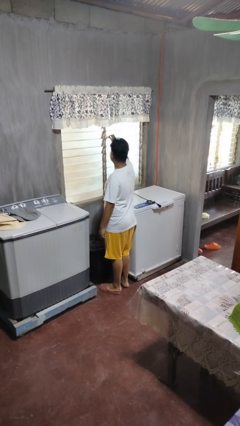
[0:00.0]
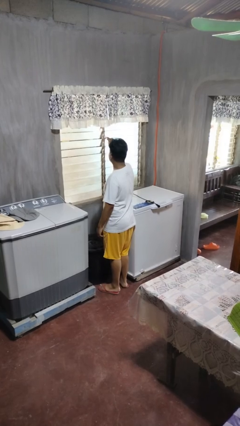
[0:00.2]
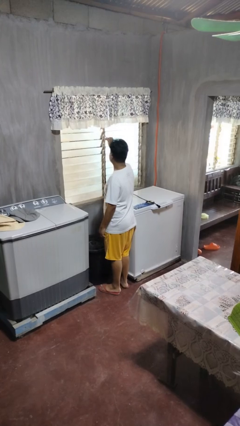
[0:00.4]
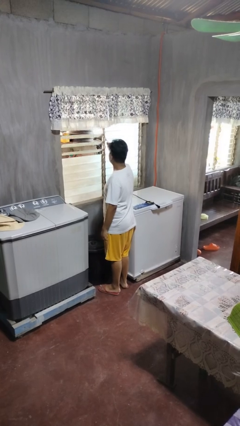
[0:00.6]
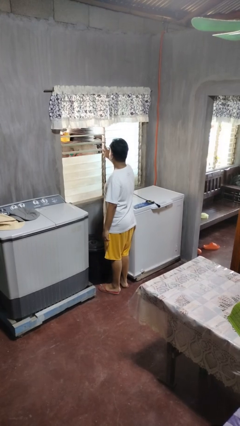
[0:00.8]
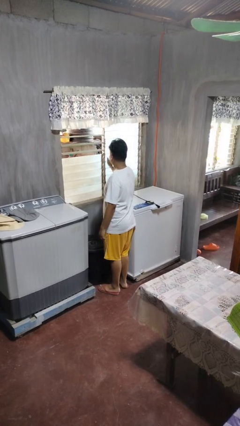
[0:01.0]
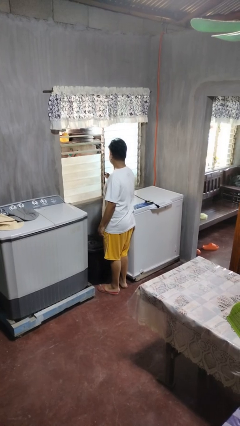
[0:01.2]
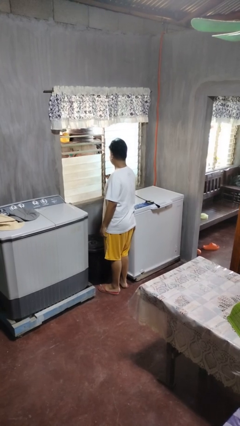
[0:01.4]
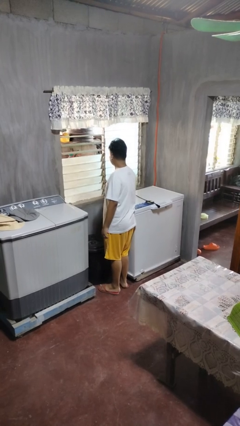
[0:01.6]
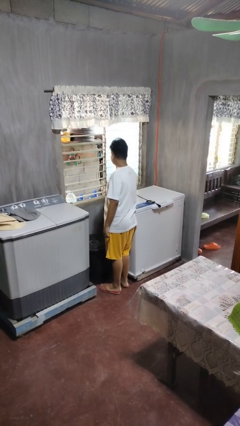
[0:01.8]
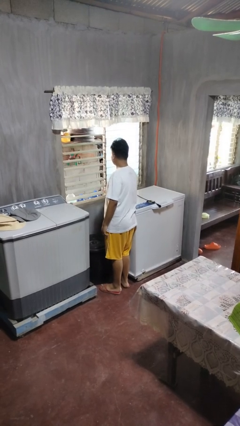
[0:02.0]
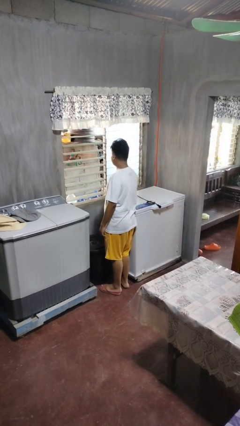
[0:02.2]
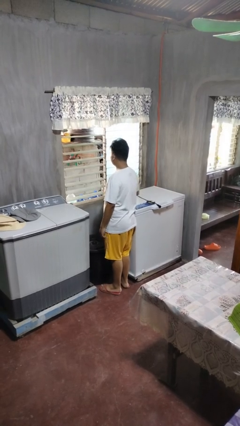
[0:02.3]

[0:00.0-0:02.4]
person opens home window

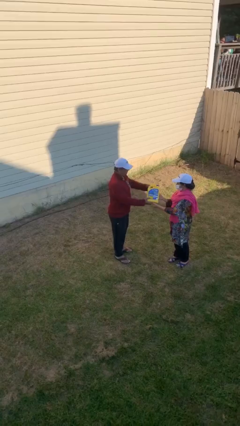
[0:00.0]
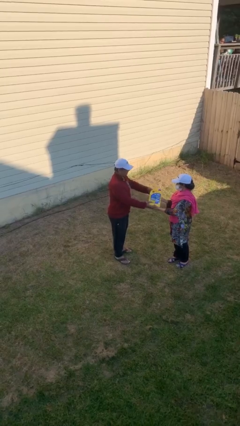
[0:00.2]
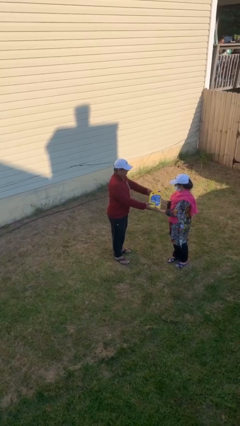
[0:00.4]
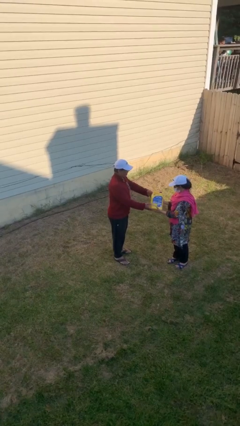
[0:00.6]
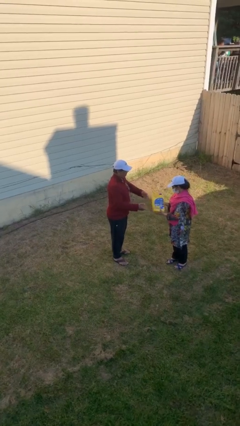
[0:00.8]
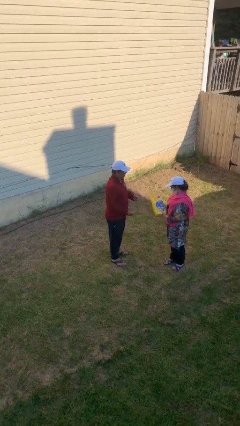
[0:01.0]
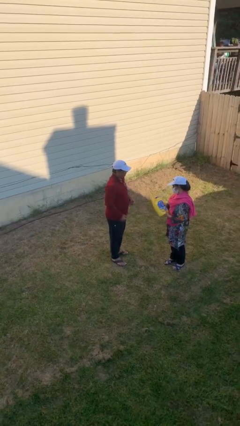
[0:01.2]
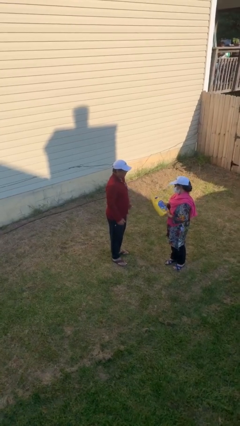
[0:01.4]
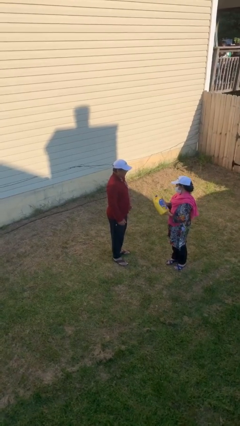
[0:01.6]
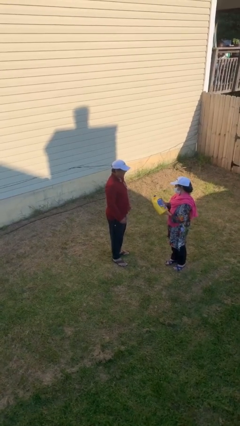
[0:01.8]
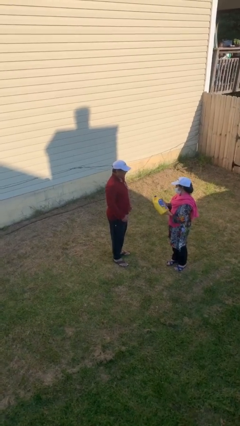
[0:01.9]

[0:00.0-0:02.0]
person transfers object to person

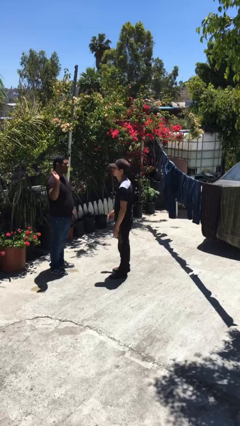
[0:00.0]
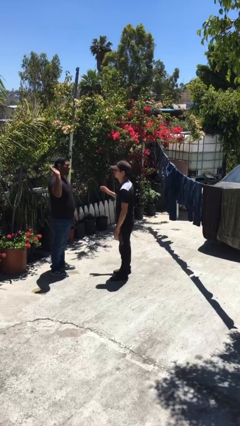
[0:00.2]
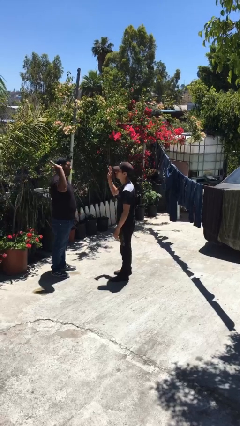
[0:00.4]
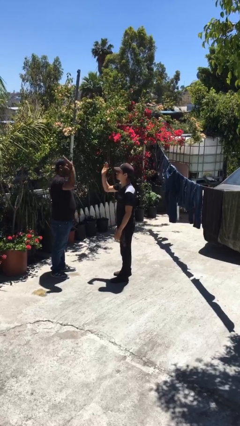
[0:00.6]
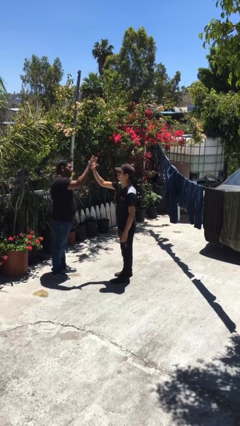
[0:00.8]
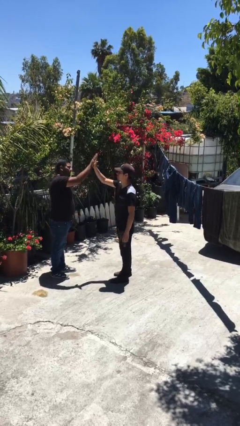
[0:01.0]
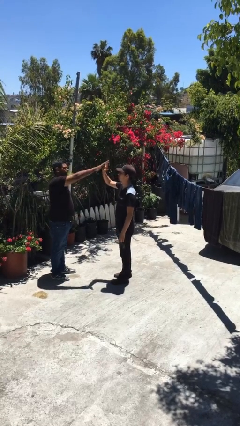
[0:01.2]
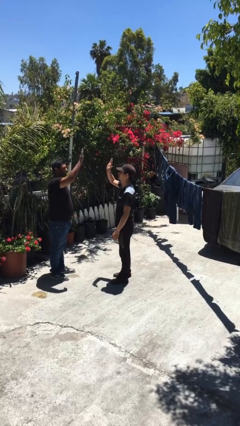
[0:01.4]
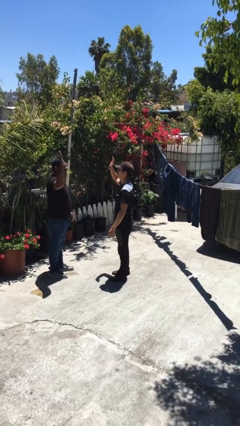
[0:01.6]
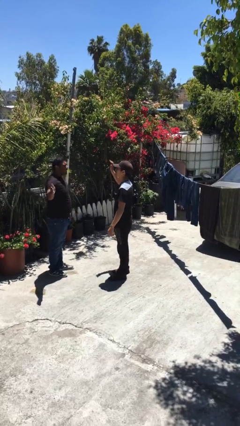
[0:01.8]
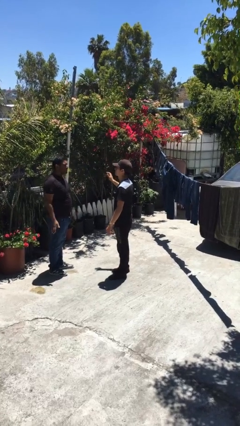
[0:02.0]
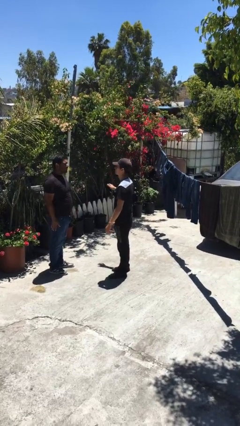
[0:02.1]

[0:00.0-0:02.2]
person highfives hand

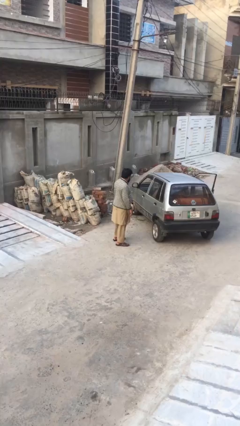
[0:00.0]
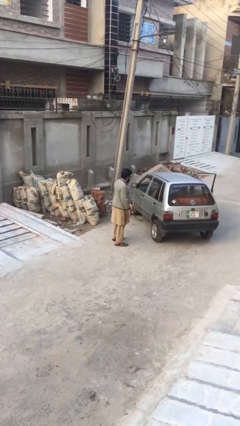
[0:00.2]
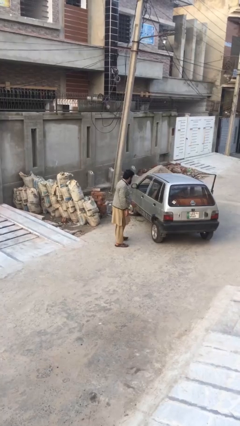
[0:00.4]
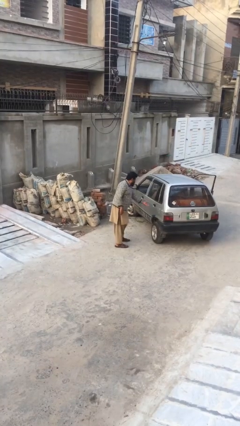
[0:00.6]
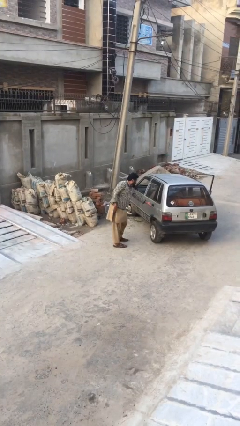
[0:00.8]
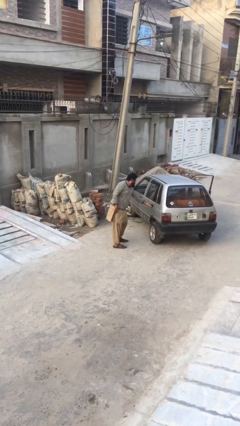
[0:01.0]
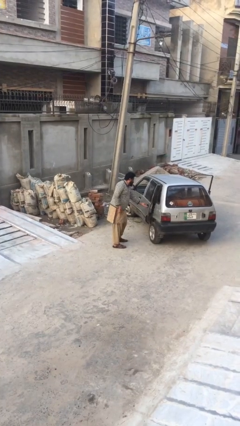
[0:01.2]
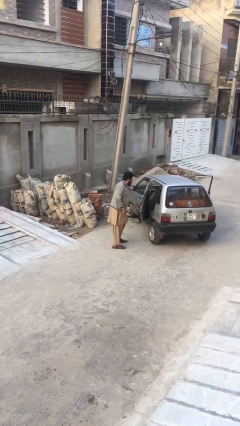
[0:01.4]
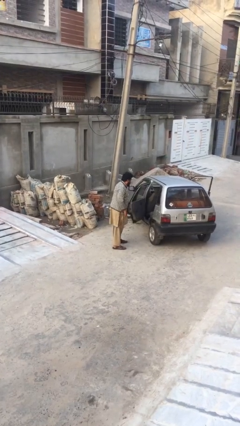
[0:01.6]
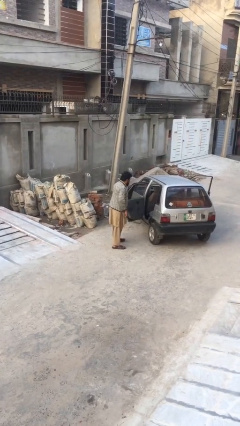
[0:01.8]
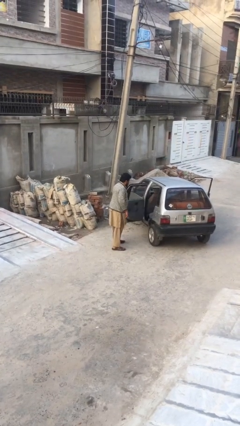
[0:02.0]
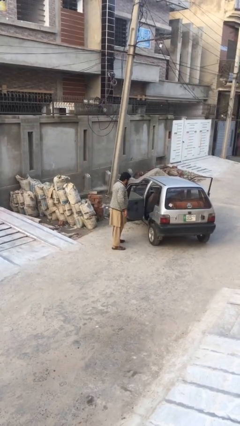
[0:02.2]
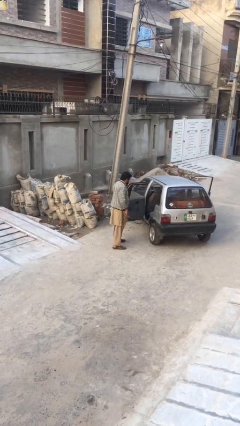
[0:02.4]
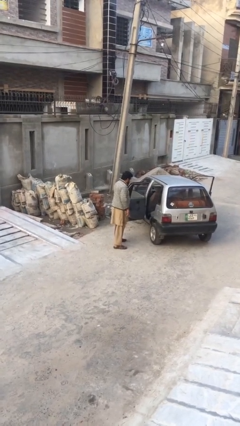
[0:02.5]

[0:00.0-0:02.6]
person opens car door

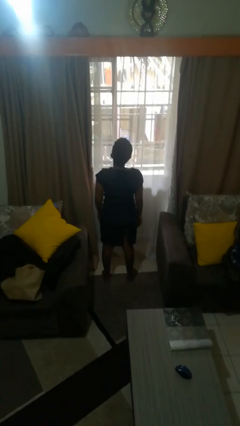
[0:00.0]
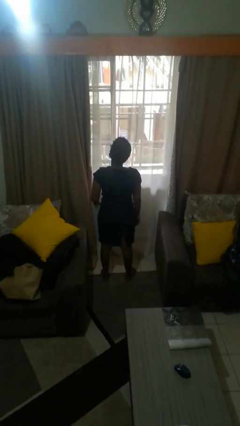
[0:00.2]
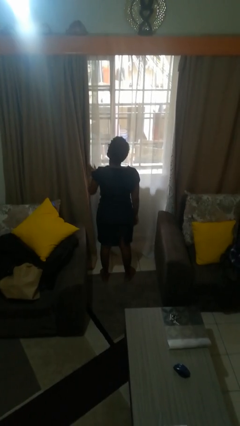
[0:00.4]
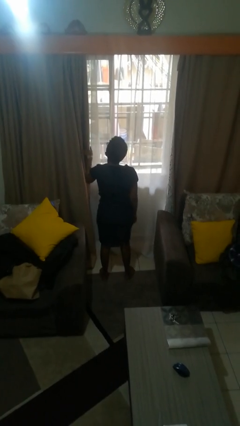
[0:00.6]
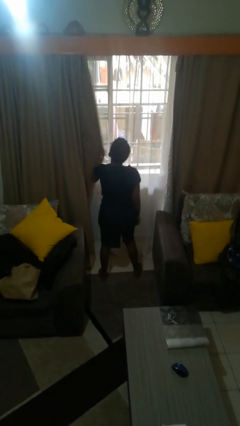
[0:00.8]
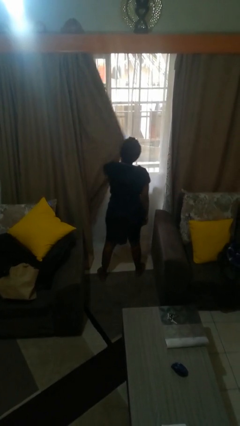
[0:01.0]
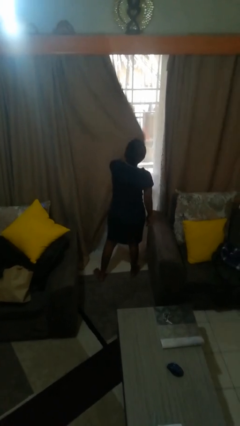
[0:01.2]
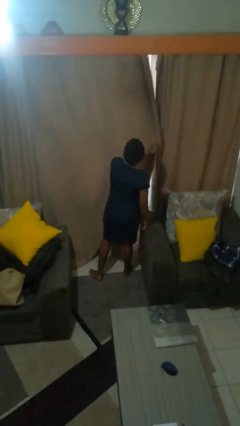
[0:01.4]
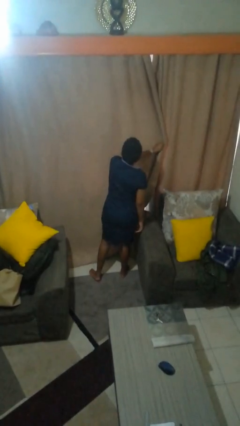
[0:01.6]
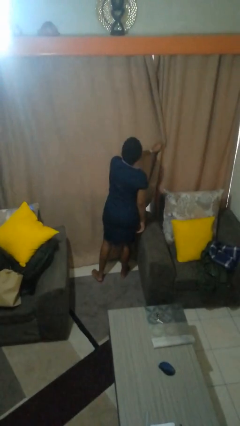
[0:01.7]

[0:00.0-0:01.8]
person closes curtains

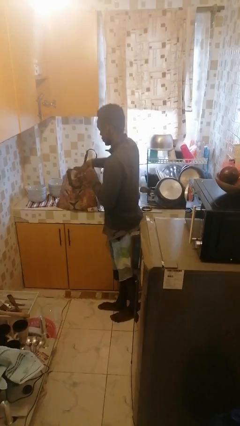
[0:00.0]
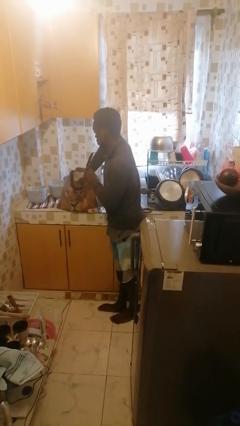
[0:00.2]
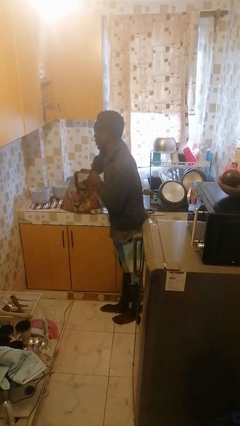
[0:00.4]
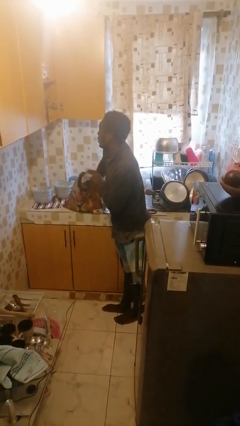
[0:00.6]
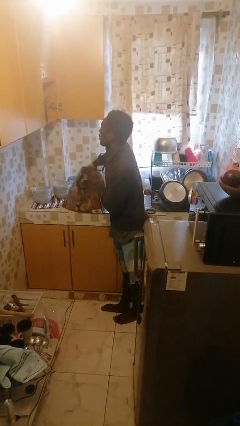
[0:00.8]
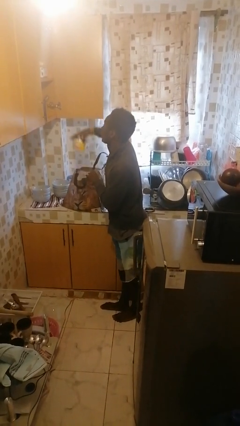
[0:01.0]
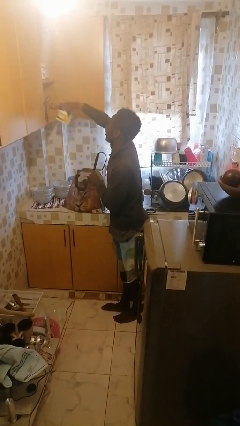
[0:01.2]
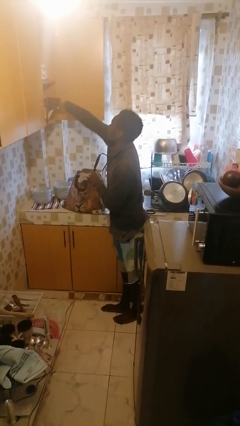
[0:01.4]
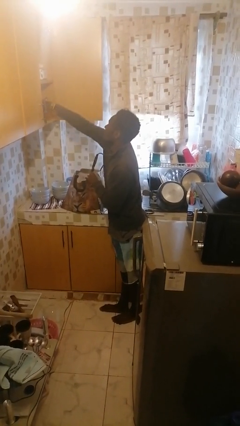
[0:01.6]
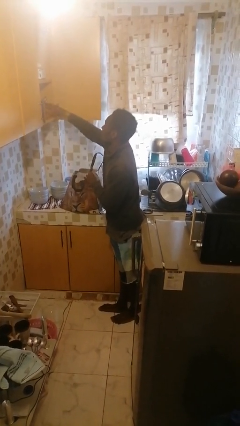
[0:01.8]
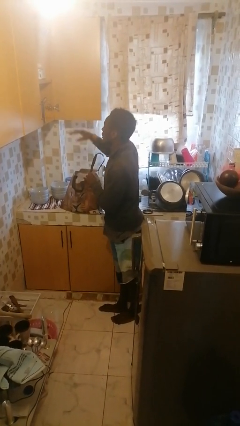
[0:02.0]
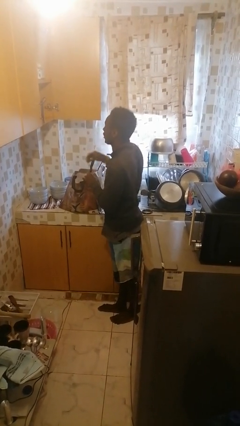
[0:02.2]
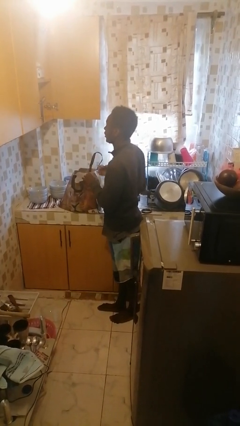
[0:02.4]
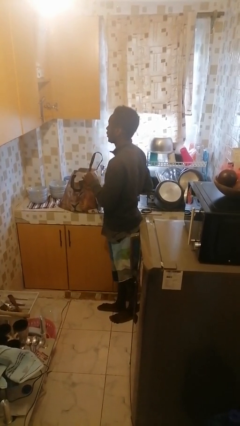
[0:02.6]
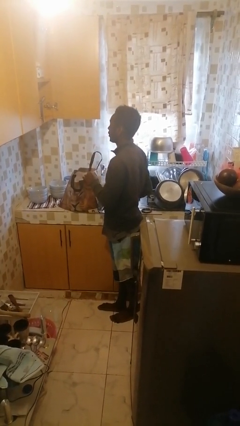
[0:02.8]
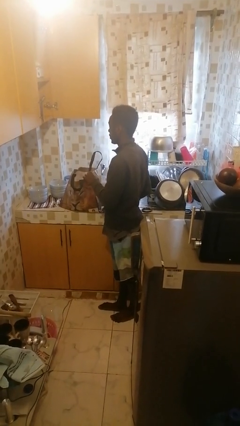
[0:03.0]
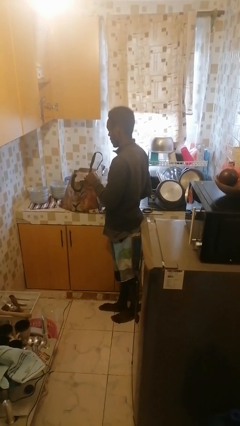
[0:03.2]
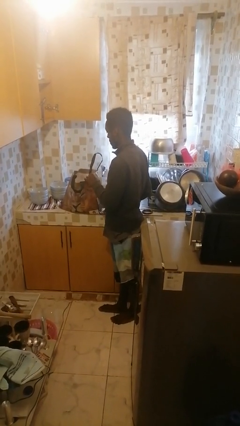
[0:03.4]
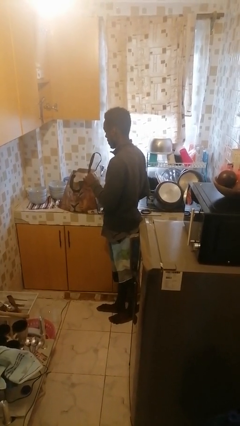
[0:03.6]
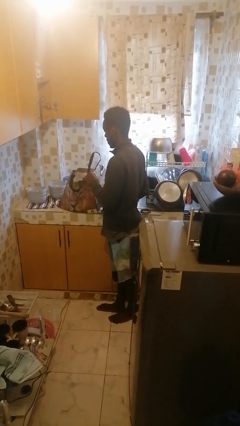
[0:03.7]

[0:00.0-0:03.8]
person loads groceries into cabinet

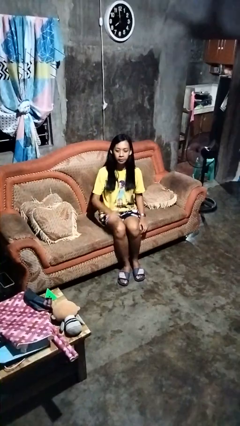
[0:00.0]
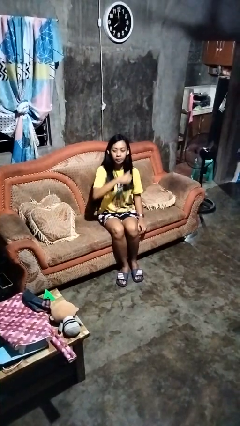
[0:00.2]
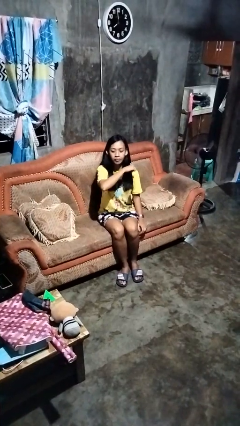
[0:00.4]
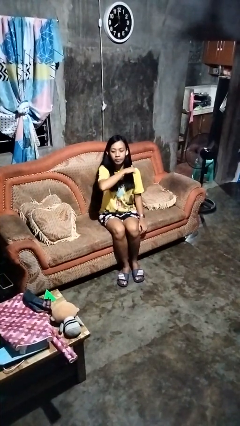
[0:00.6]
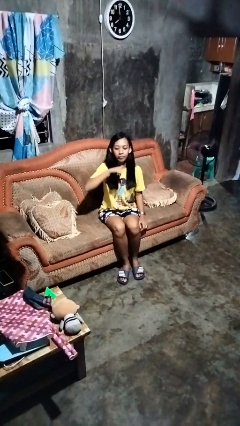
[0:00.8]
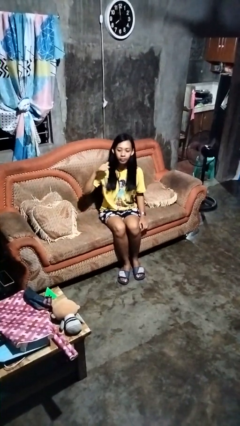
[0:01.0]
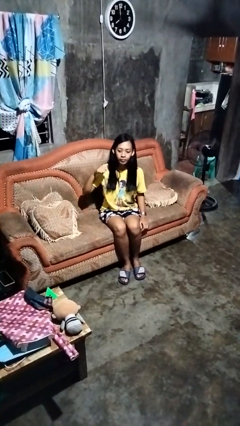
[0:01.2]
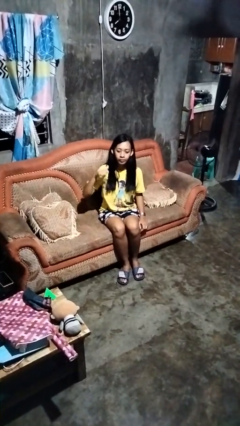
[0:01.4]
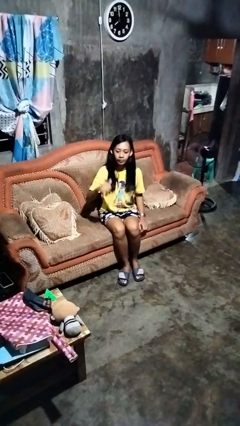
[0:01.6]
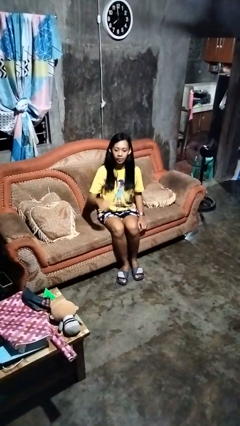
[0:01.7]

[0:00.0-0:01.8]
person gestures cut

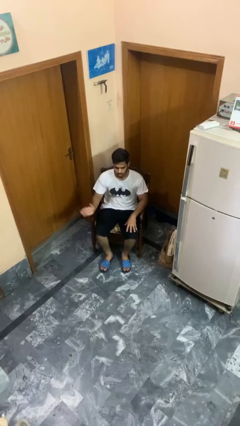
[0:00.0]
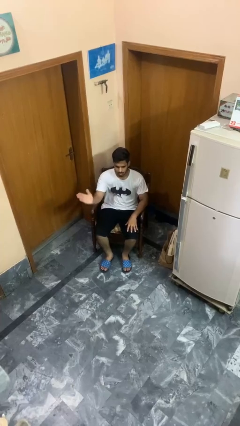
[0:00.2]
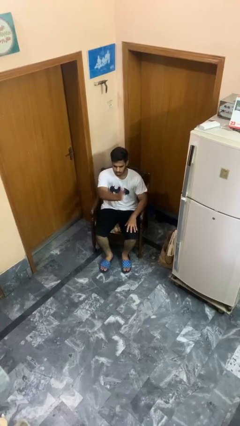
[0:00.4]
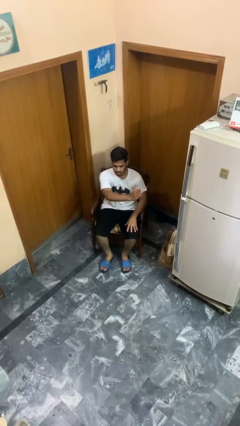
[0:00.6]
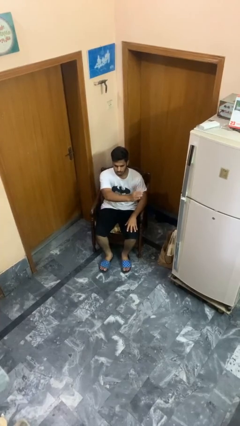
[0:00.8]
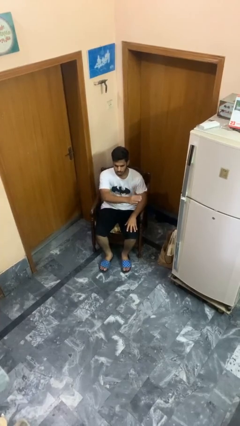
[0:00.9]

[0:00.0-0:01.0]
person gestures swipe left
